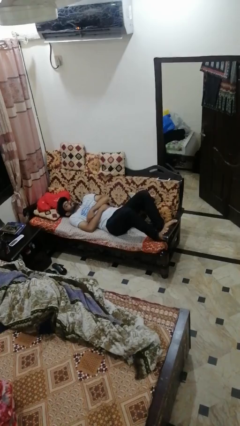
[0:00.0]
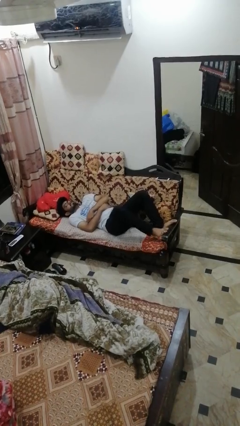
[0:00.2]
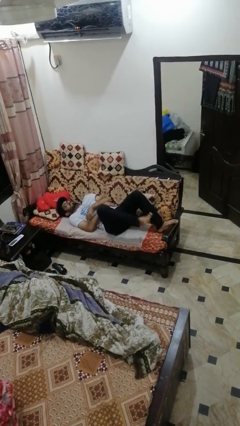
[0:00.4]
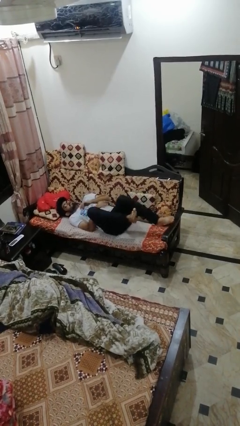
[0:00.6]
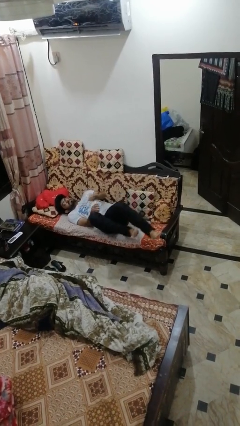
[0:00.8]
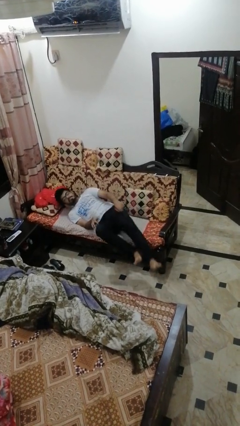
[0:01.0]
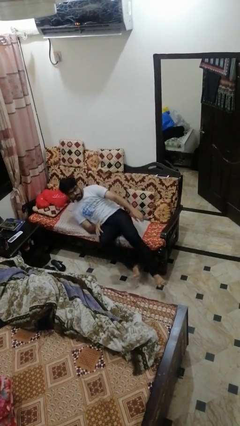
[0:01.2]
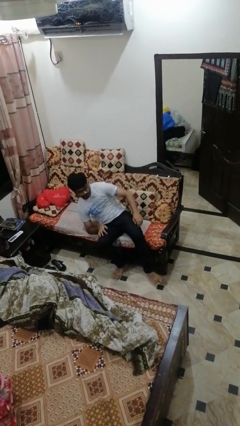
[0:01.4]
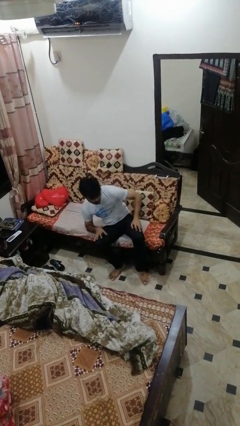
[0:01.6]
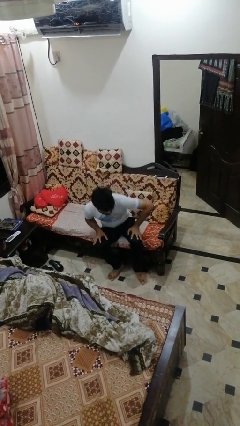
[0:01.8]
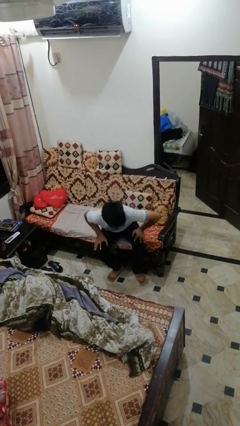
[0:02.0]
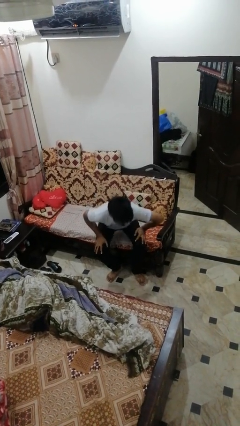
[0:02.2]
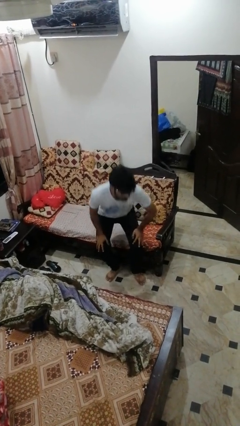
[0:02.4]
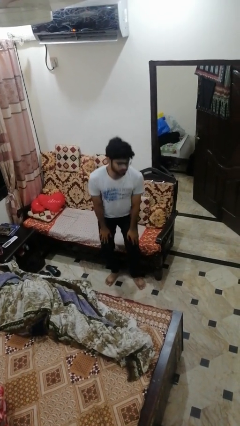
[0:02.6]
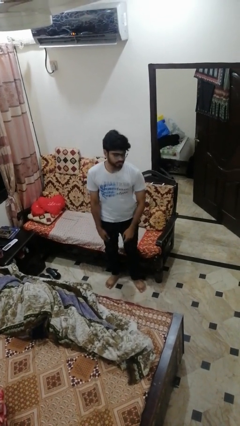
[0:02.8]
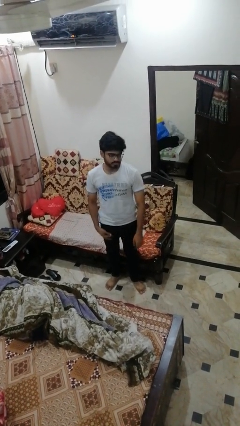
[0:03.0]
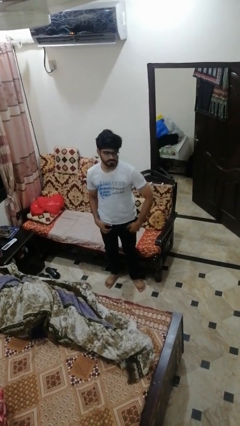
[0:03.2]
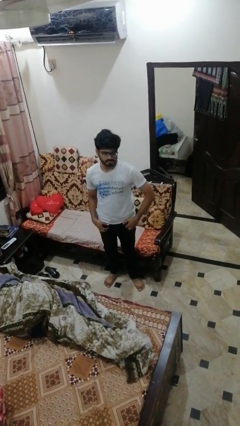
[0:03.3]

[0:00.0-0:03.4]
person stands up

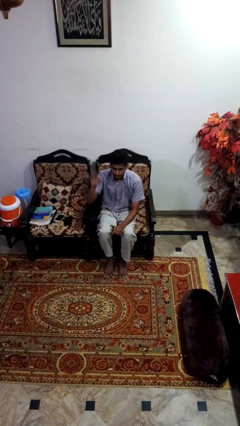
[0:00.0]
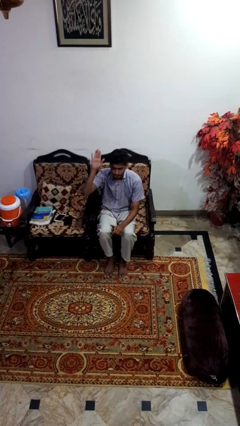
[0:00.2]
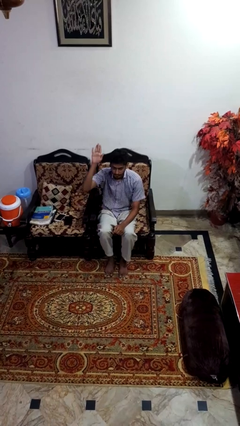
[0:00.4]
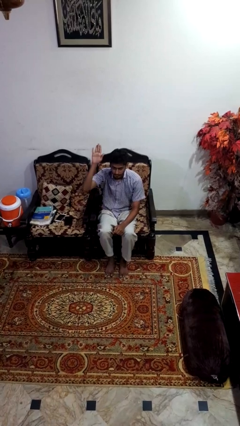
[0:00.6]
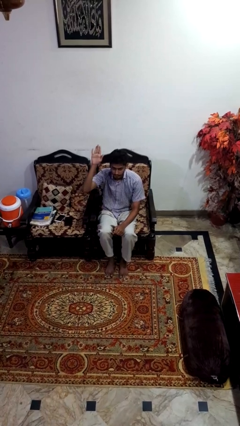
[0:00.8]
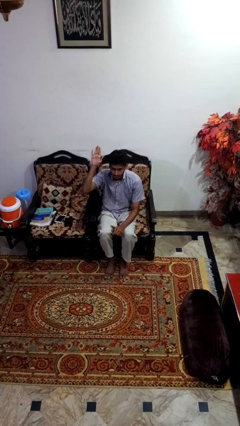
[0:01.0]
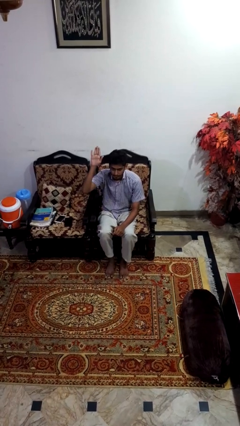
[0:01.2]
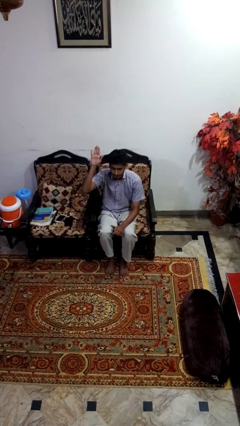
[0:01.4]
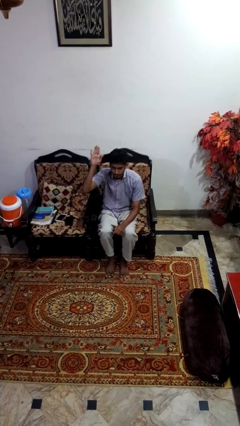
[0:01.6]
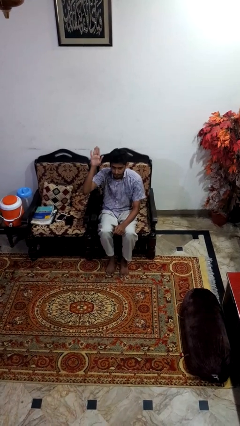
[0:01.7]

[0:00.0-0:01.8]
person gestures raise hand

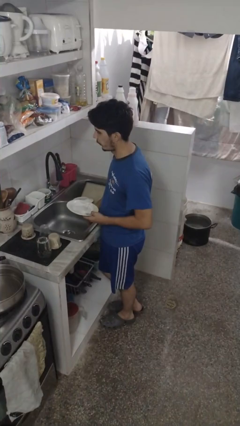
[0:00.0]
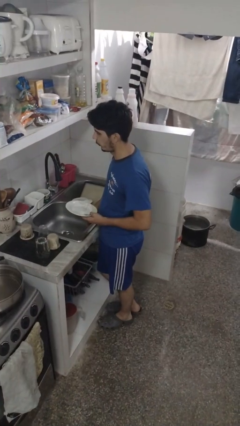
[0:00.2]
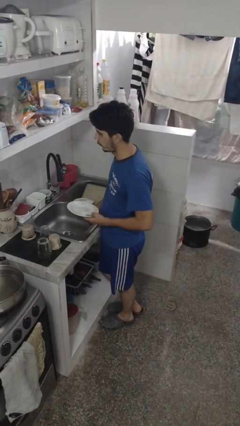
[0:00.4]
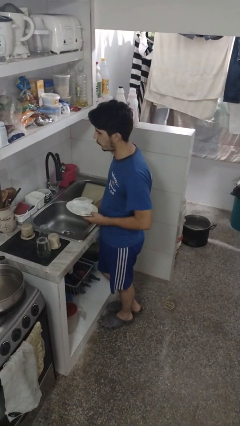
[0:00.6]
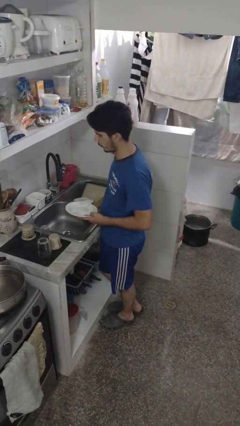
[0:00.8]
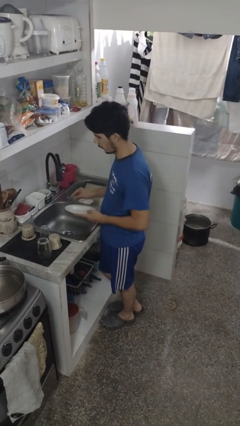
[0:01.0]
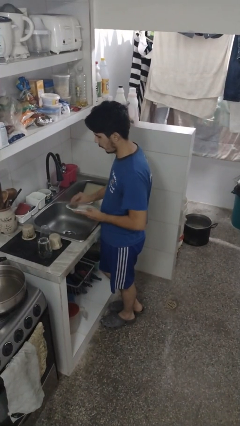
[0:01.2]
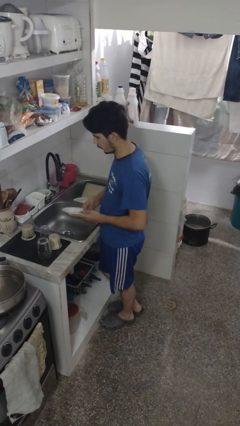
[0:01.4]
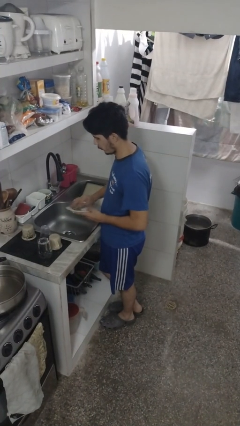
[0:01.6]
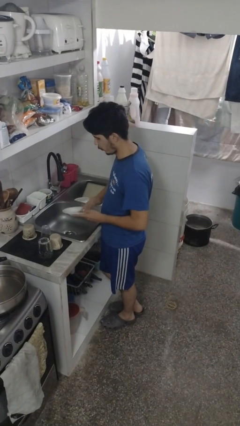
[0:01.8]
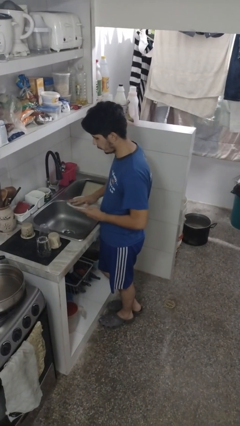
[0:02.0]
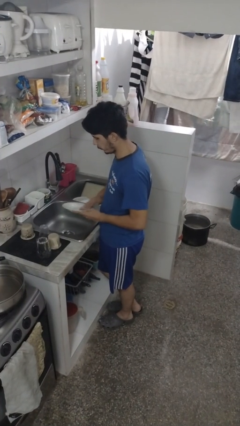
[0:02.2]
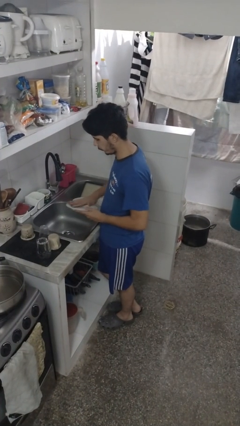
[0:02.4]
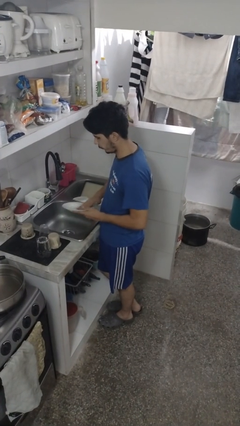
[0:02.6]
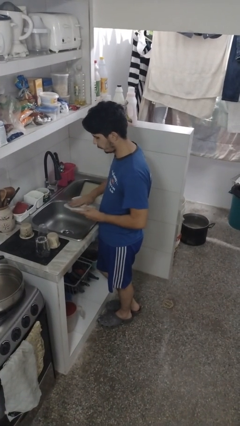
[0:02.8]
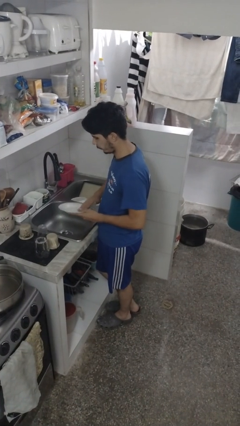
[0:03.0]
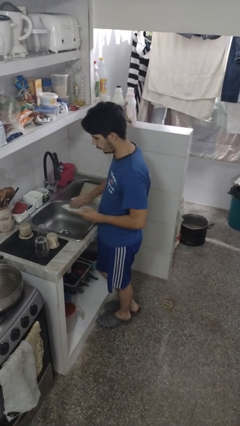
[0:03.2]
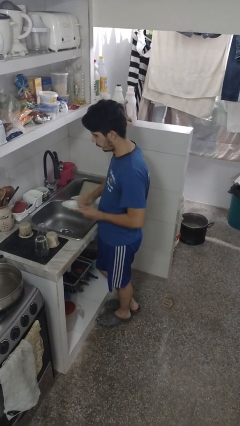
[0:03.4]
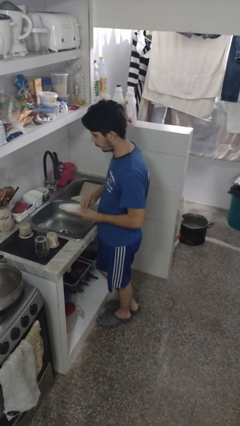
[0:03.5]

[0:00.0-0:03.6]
person washes dish

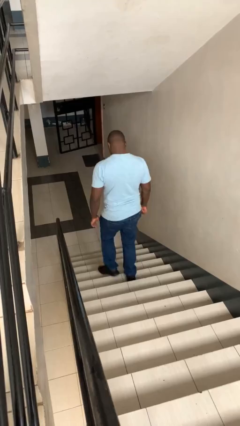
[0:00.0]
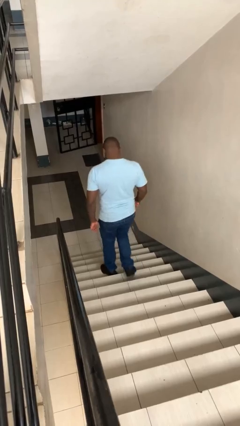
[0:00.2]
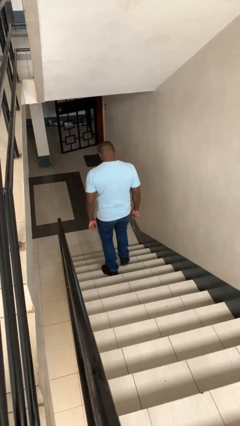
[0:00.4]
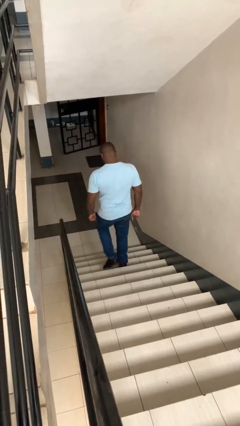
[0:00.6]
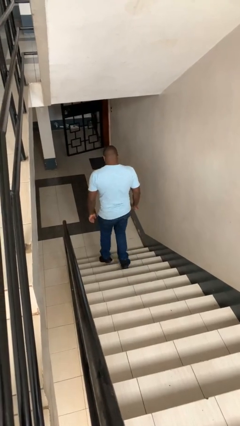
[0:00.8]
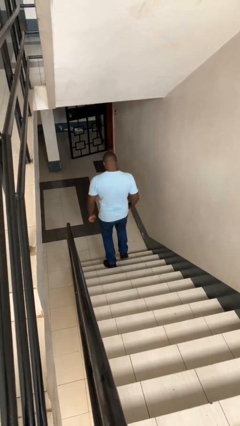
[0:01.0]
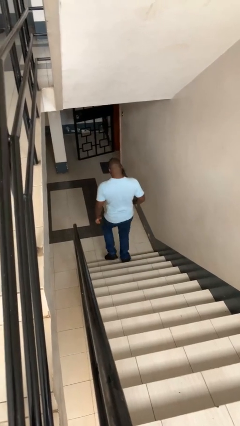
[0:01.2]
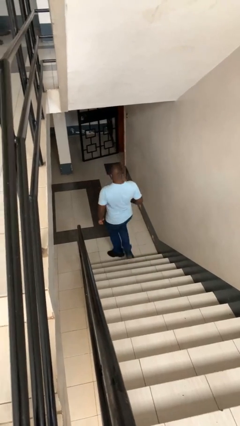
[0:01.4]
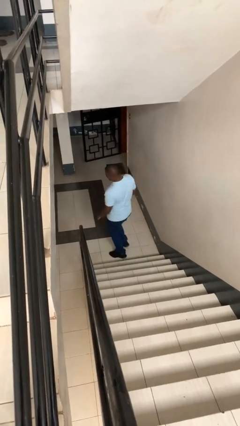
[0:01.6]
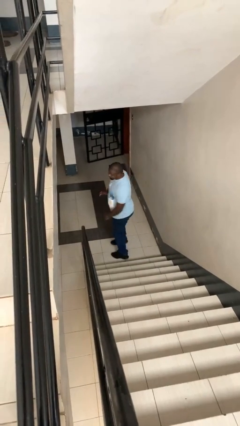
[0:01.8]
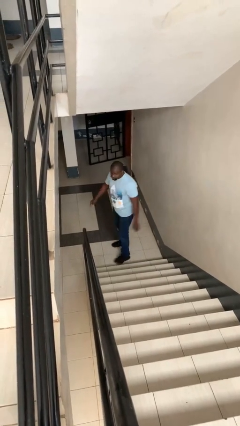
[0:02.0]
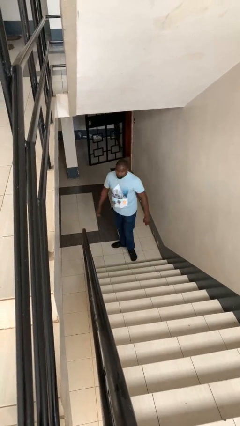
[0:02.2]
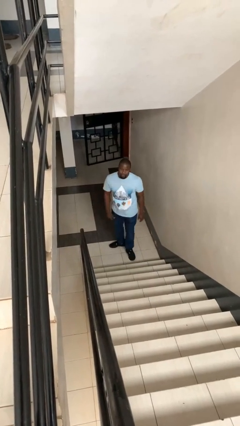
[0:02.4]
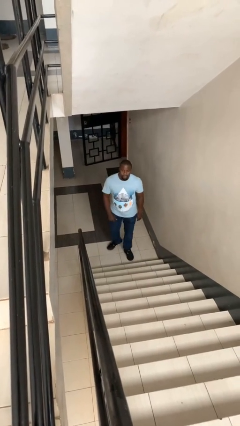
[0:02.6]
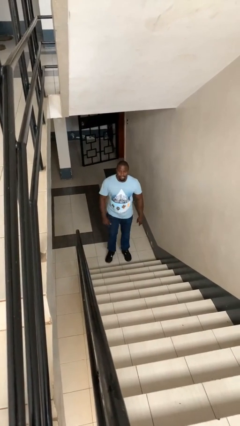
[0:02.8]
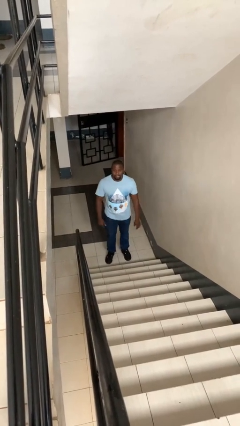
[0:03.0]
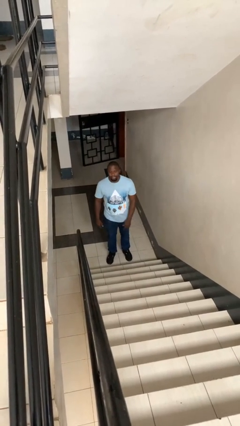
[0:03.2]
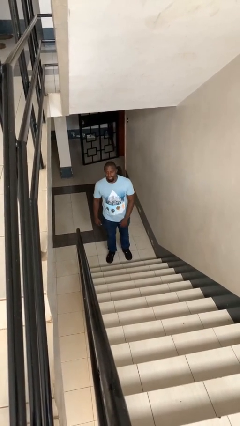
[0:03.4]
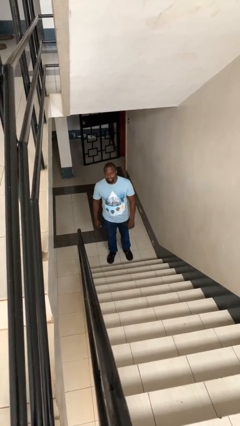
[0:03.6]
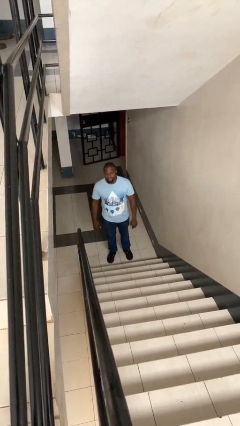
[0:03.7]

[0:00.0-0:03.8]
person climbs down stairs

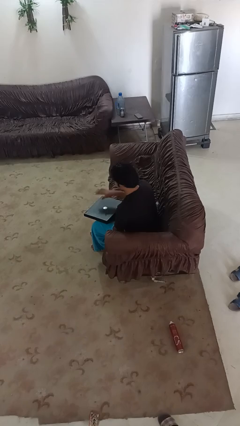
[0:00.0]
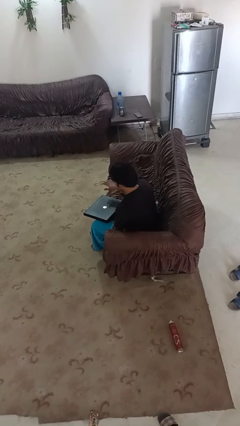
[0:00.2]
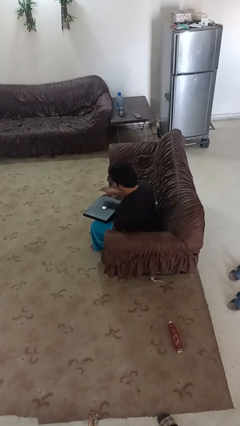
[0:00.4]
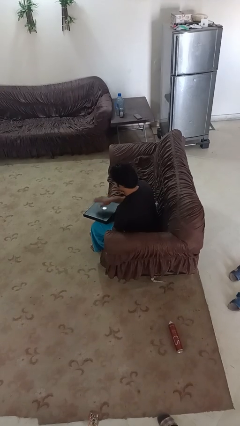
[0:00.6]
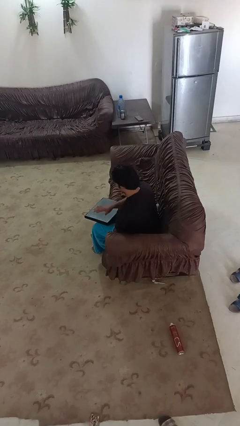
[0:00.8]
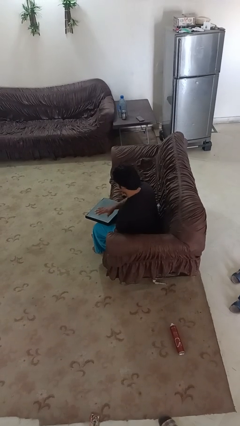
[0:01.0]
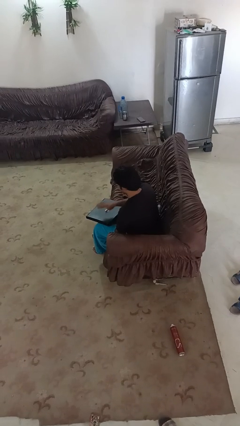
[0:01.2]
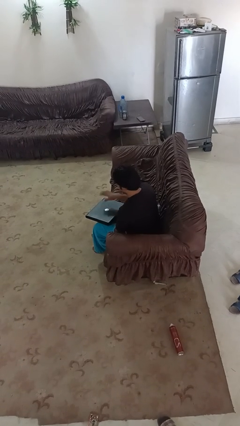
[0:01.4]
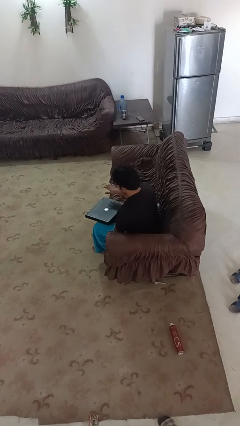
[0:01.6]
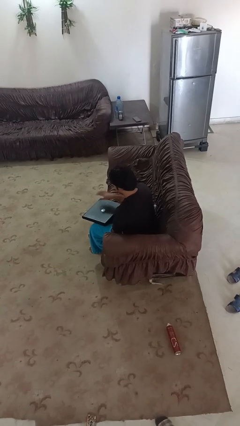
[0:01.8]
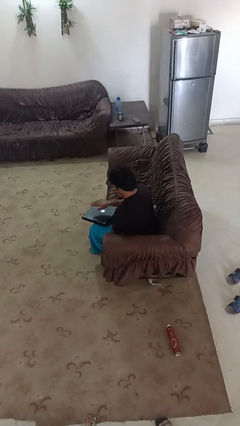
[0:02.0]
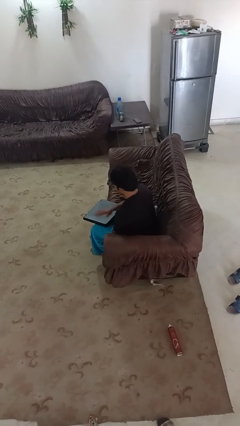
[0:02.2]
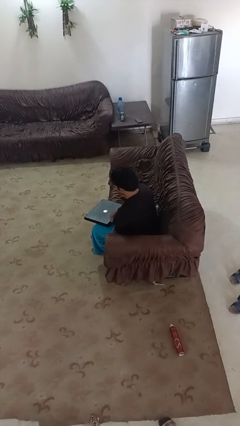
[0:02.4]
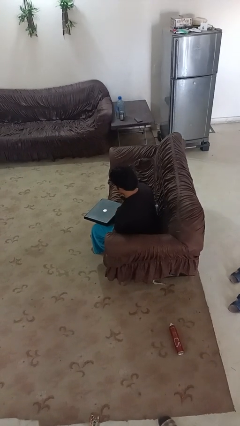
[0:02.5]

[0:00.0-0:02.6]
person waves hand over object

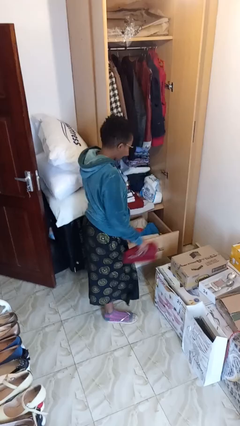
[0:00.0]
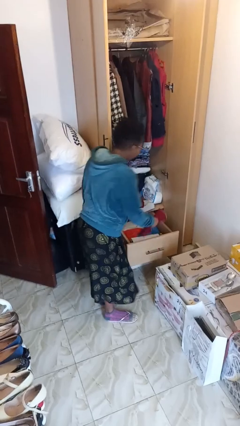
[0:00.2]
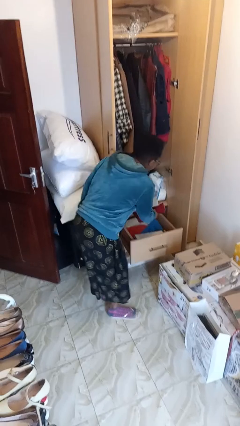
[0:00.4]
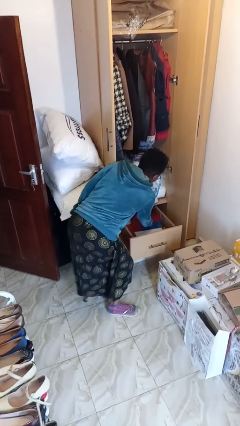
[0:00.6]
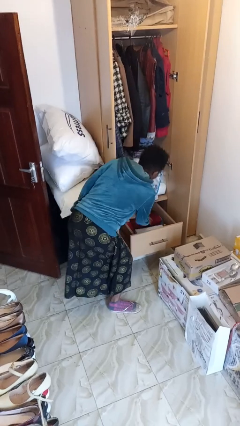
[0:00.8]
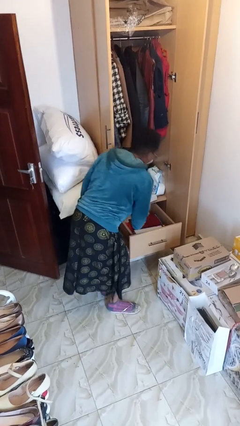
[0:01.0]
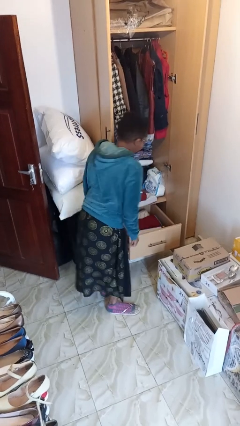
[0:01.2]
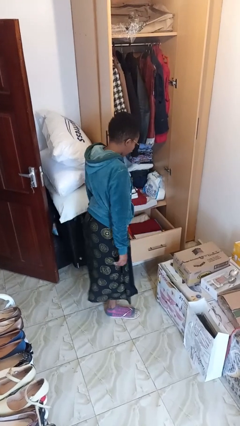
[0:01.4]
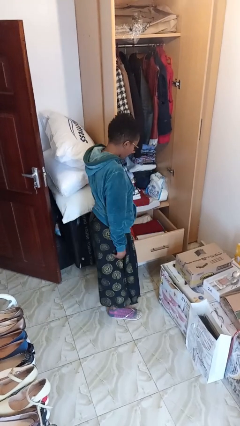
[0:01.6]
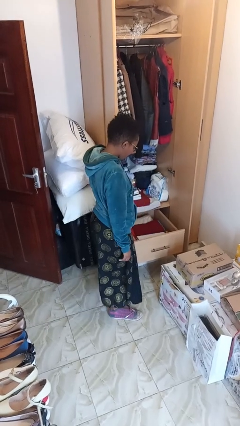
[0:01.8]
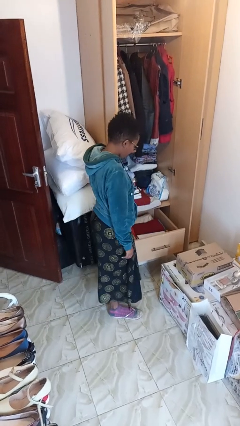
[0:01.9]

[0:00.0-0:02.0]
person puts clothes into dresser

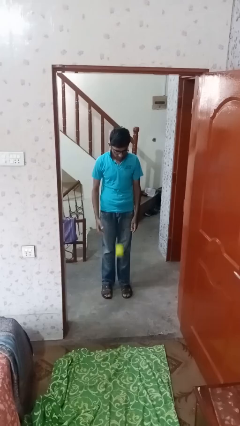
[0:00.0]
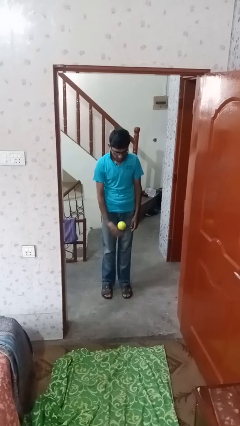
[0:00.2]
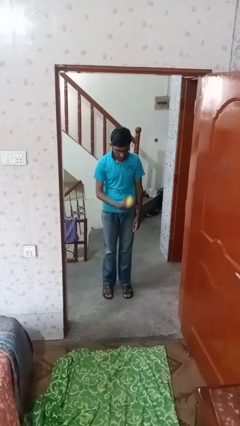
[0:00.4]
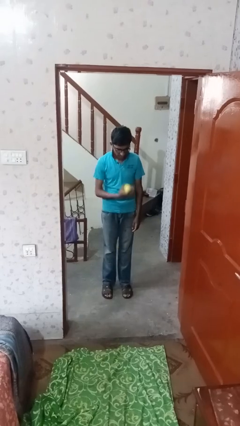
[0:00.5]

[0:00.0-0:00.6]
person bounces ball on floor
